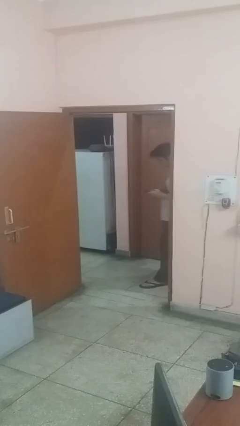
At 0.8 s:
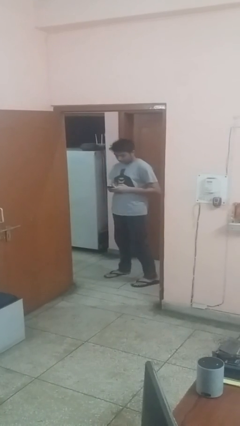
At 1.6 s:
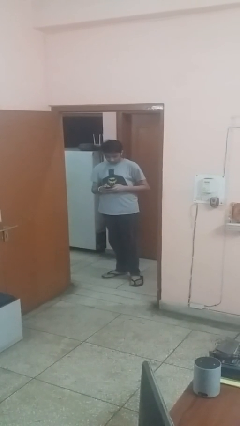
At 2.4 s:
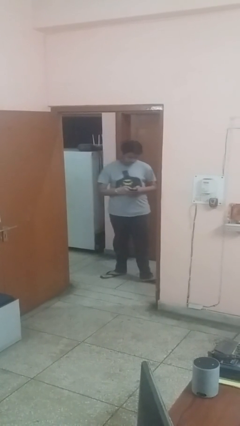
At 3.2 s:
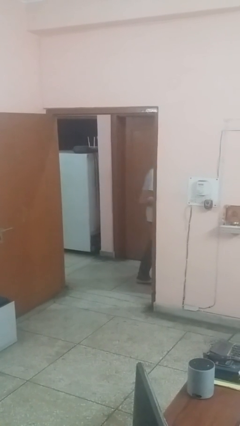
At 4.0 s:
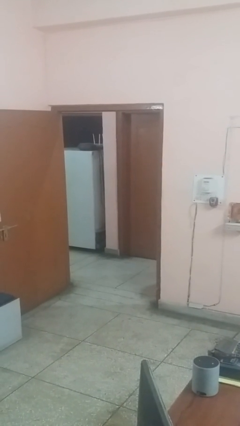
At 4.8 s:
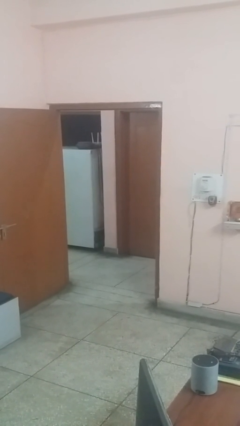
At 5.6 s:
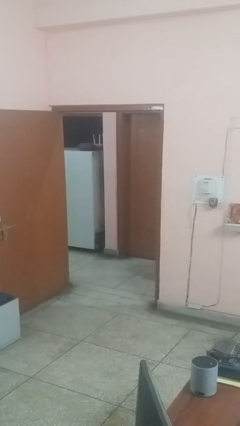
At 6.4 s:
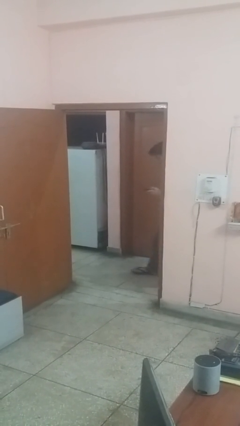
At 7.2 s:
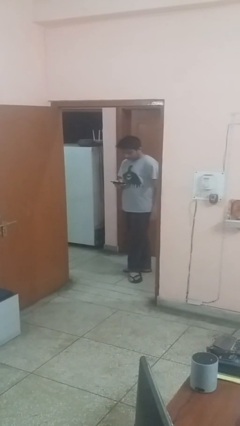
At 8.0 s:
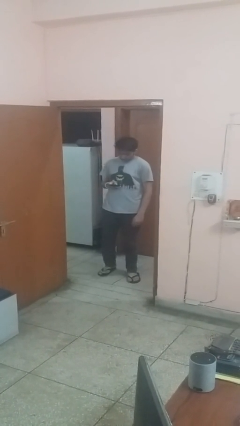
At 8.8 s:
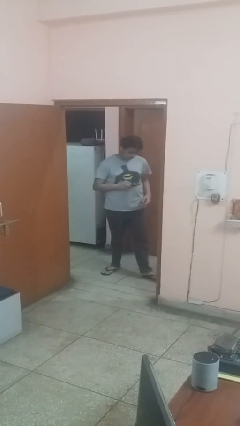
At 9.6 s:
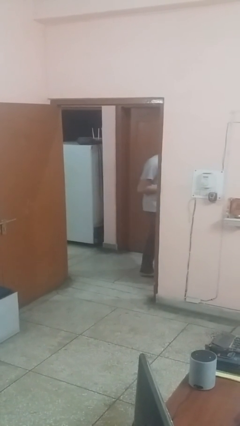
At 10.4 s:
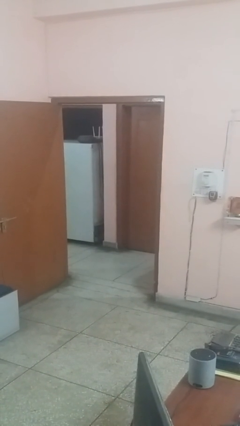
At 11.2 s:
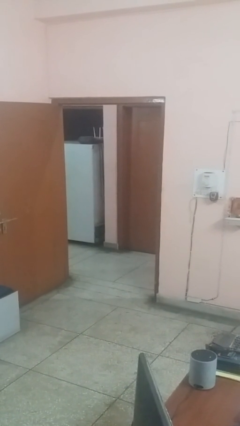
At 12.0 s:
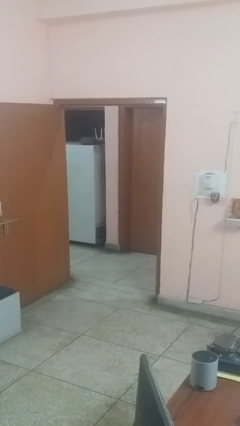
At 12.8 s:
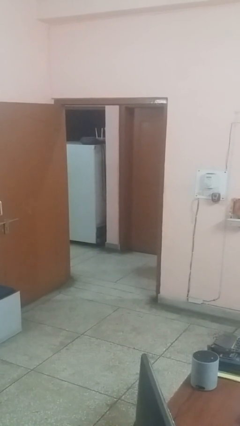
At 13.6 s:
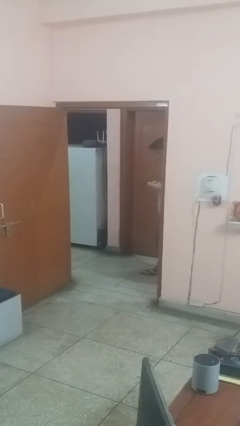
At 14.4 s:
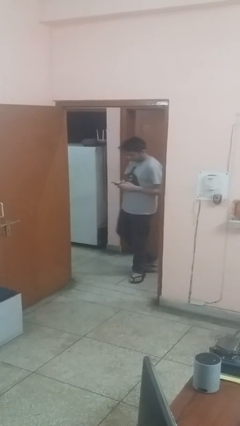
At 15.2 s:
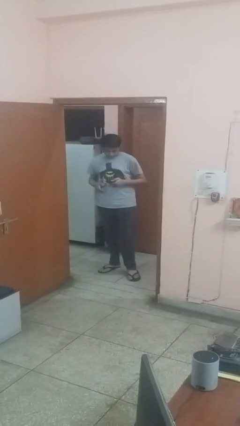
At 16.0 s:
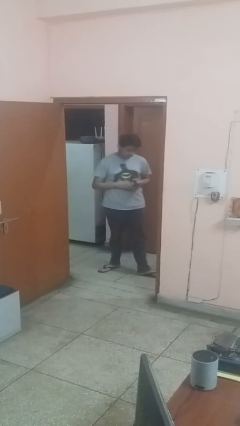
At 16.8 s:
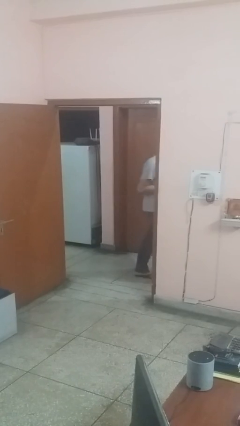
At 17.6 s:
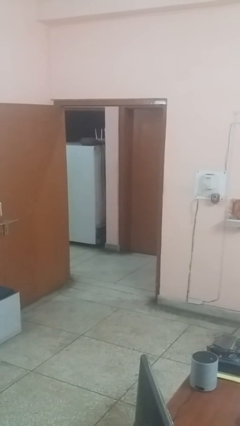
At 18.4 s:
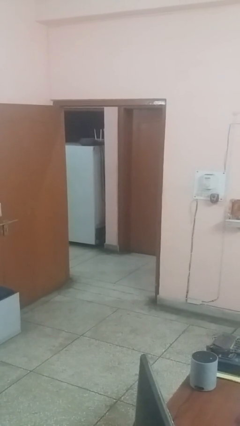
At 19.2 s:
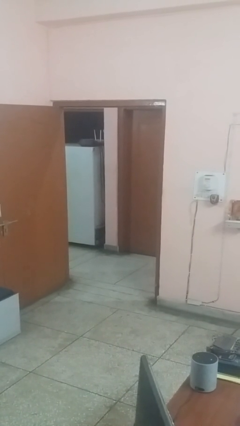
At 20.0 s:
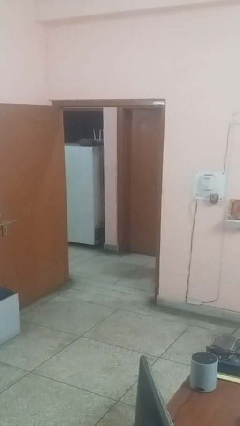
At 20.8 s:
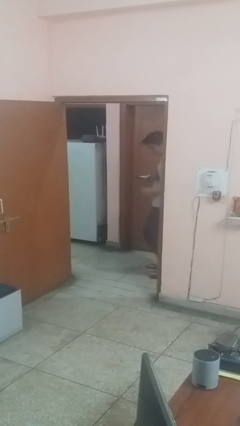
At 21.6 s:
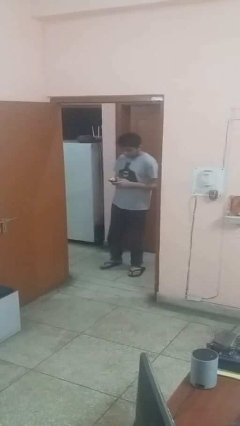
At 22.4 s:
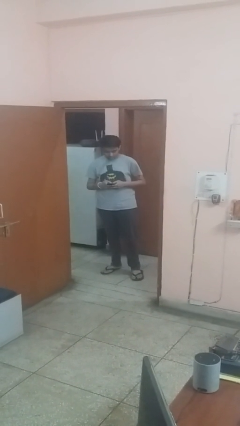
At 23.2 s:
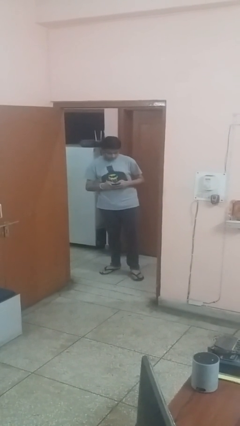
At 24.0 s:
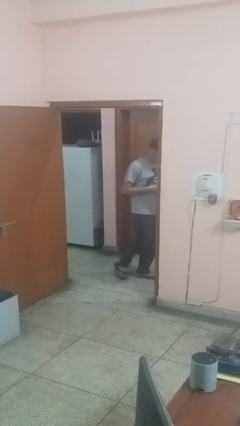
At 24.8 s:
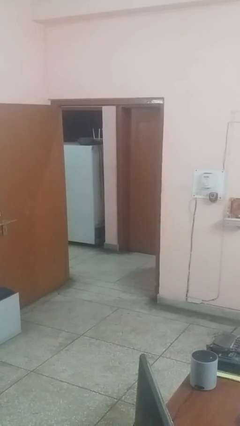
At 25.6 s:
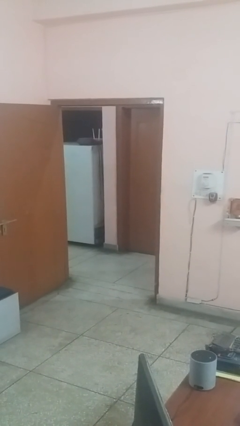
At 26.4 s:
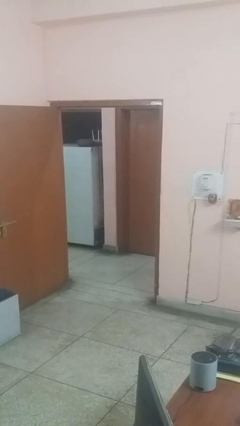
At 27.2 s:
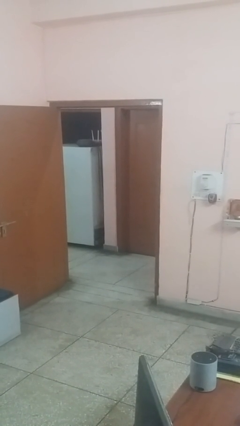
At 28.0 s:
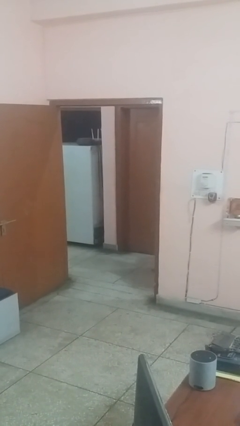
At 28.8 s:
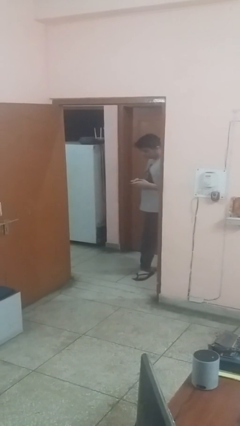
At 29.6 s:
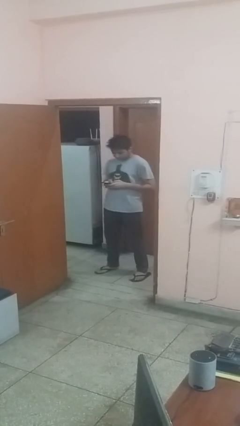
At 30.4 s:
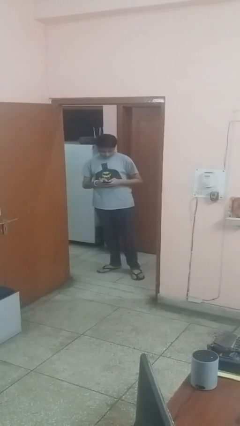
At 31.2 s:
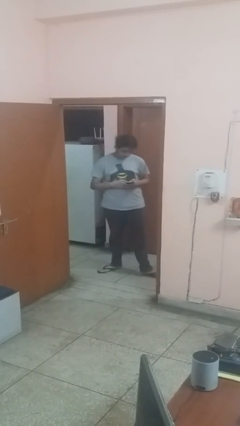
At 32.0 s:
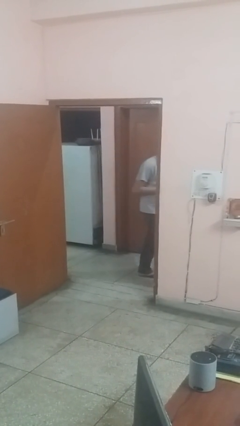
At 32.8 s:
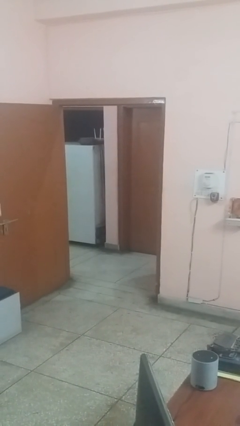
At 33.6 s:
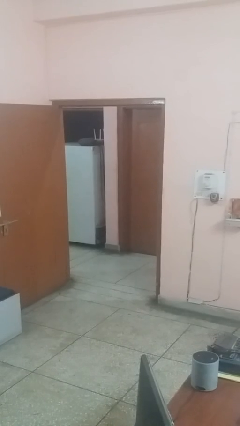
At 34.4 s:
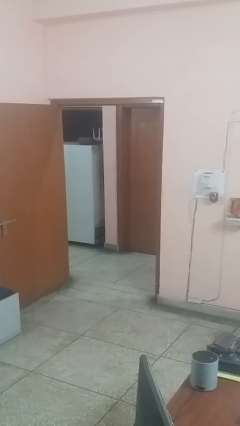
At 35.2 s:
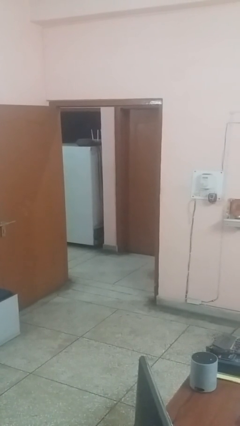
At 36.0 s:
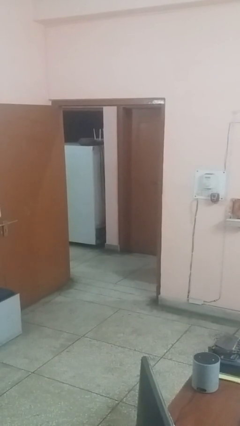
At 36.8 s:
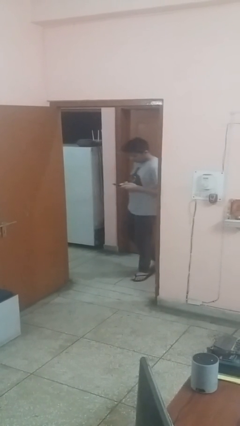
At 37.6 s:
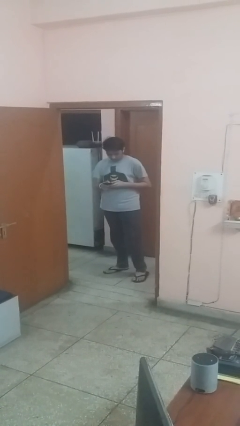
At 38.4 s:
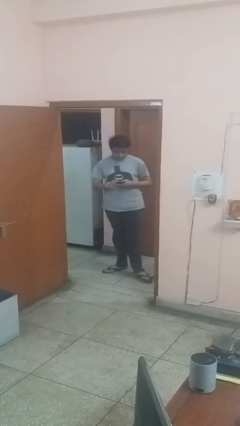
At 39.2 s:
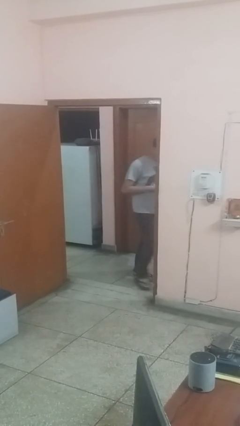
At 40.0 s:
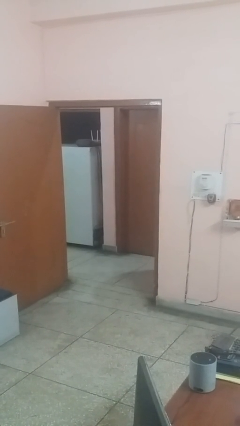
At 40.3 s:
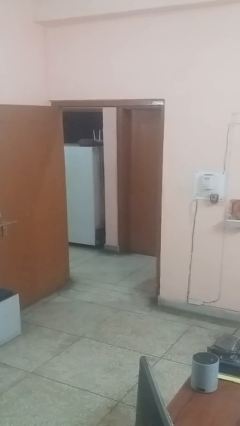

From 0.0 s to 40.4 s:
person texts on phone

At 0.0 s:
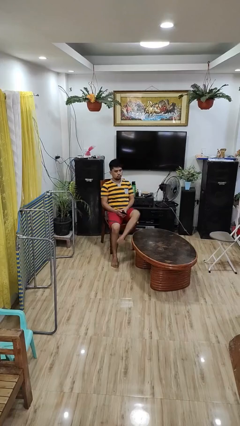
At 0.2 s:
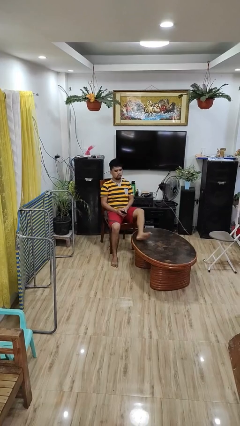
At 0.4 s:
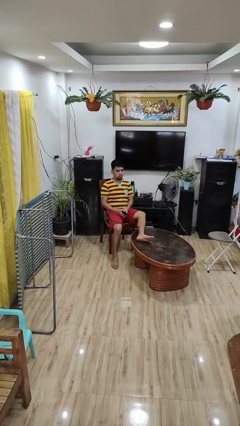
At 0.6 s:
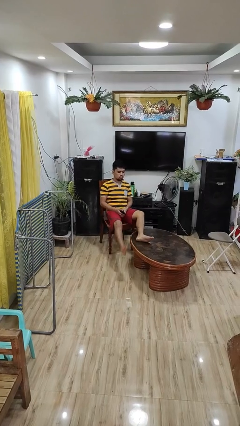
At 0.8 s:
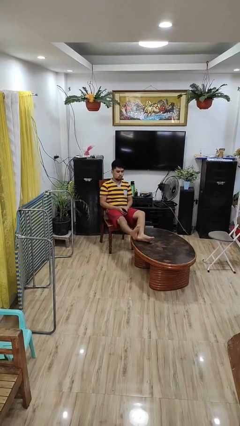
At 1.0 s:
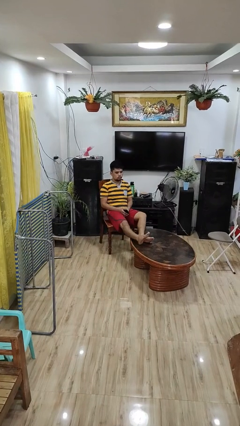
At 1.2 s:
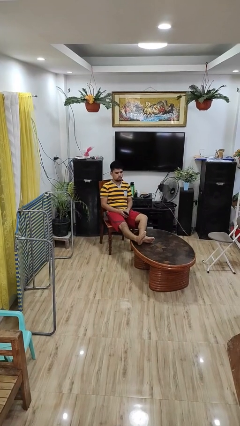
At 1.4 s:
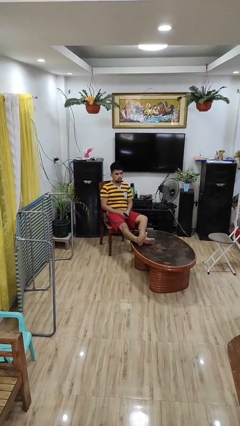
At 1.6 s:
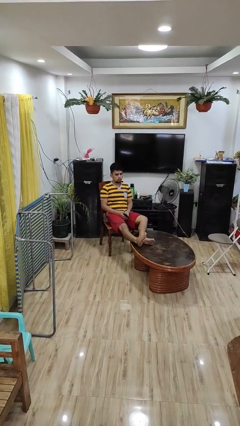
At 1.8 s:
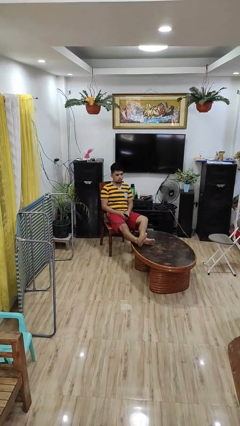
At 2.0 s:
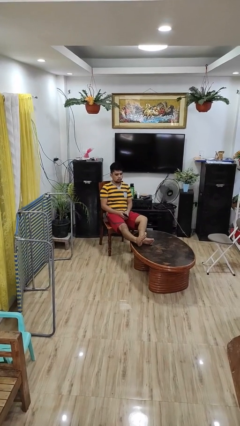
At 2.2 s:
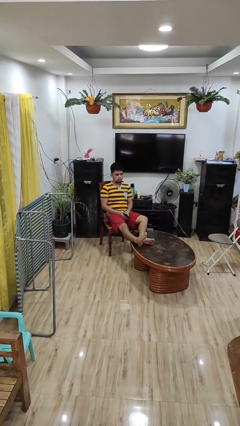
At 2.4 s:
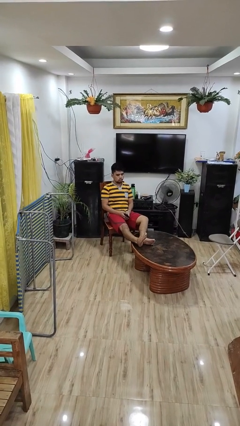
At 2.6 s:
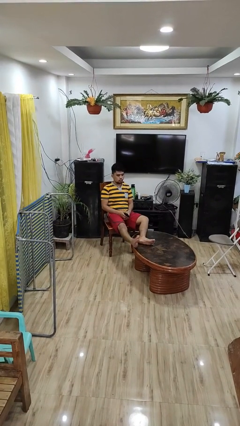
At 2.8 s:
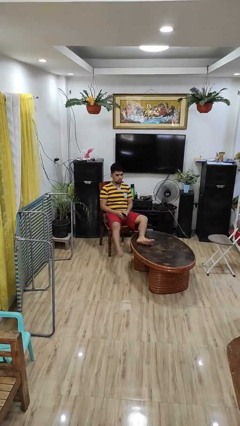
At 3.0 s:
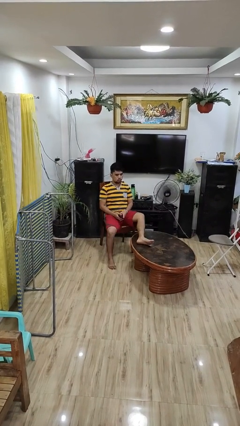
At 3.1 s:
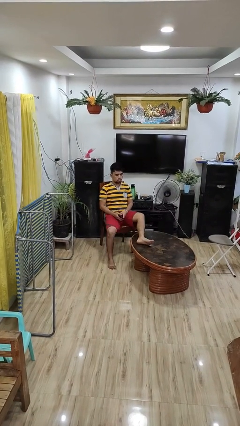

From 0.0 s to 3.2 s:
person puts feet up

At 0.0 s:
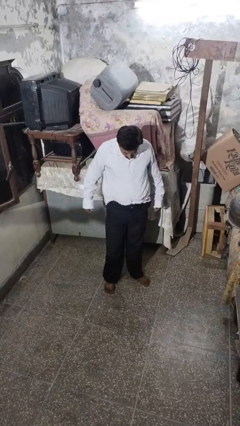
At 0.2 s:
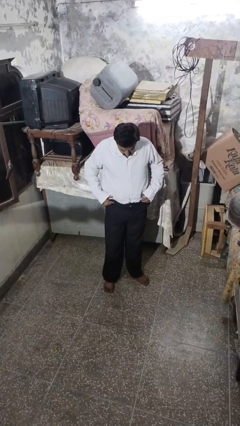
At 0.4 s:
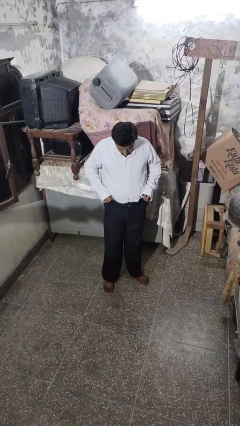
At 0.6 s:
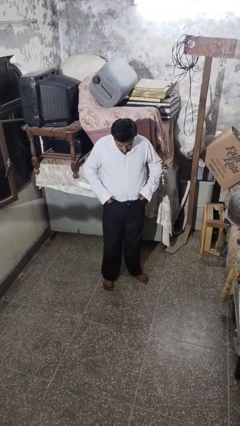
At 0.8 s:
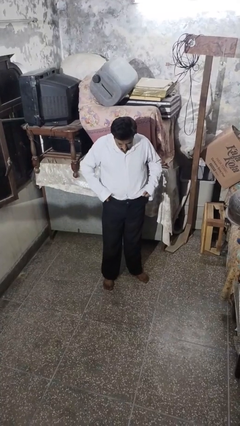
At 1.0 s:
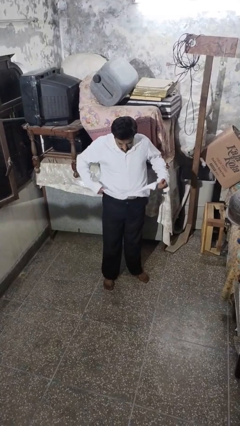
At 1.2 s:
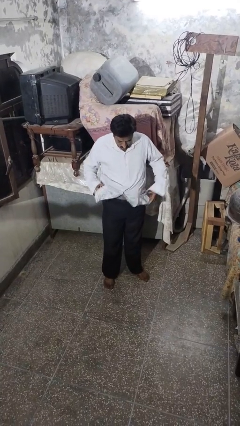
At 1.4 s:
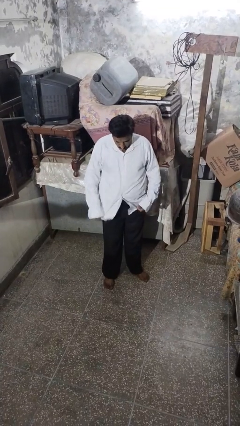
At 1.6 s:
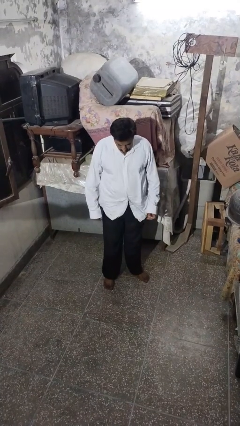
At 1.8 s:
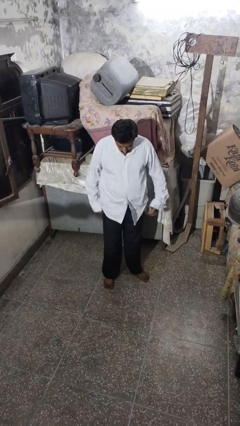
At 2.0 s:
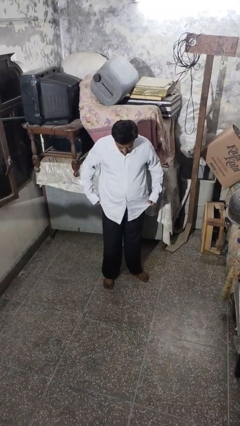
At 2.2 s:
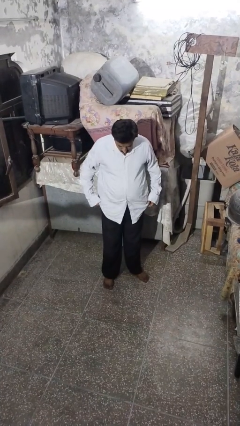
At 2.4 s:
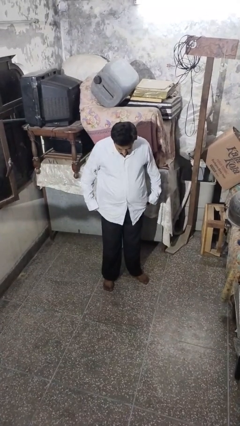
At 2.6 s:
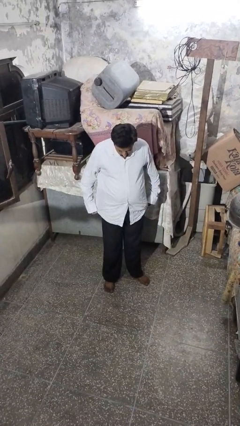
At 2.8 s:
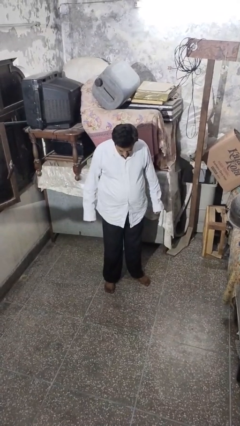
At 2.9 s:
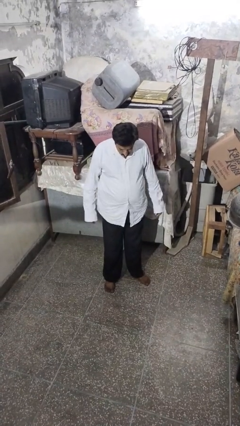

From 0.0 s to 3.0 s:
person untucks shirt

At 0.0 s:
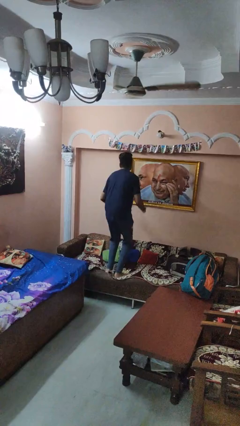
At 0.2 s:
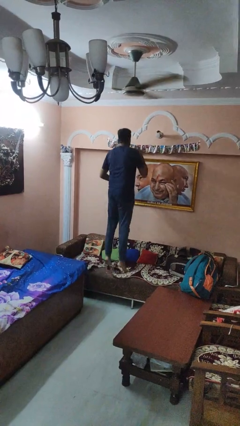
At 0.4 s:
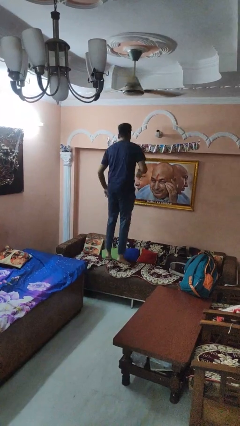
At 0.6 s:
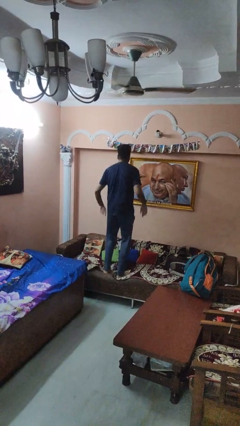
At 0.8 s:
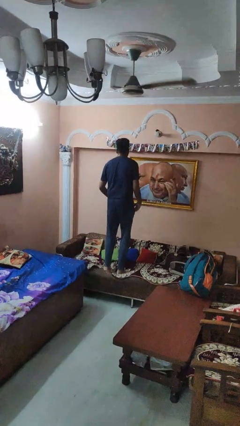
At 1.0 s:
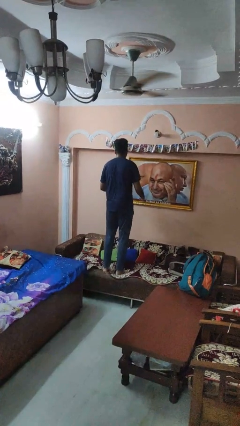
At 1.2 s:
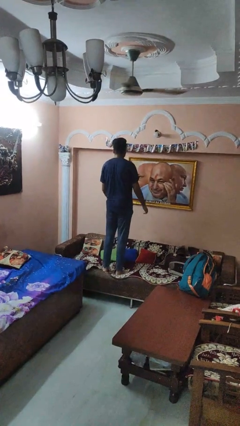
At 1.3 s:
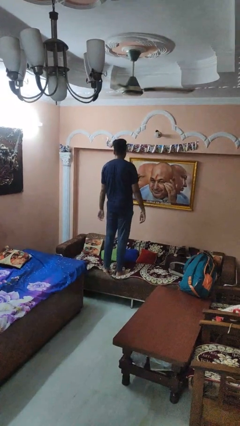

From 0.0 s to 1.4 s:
person jumps on couch
